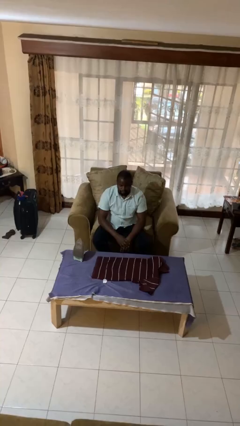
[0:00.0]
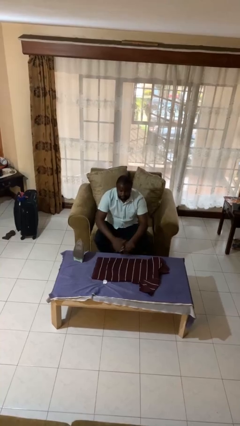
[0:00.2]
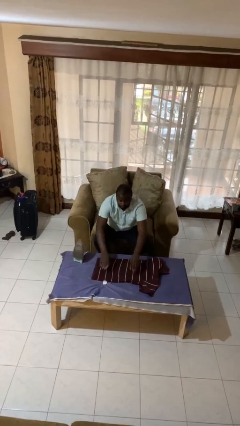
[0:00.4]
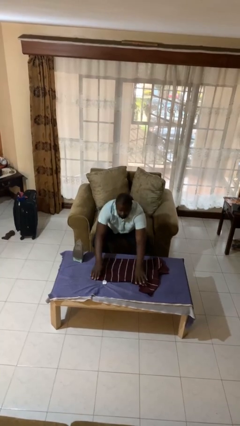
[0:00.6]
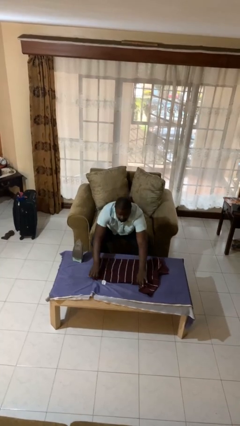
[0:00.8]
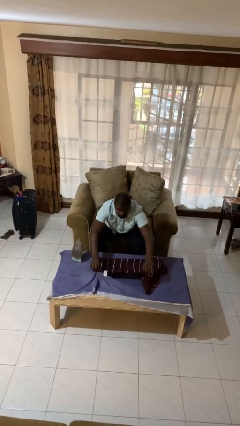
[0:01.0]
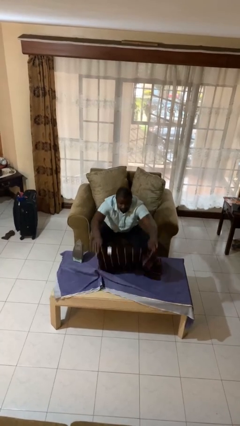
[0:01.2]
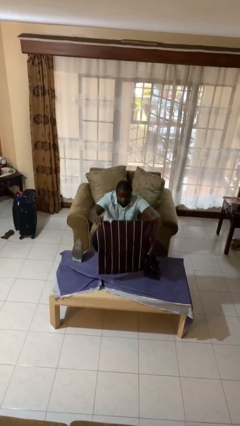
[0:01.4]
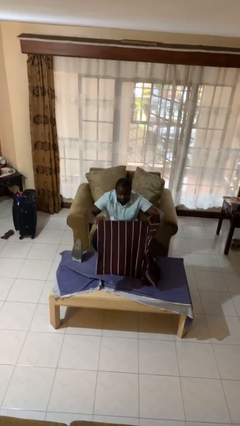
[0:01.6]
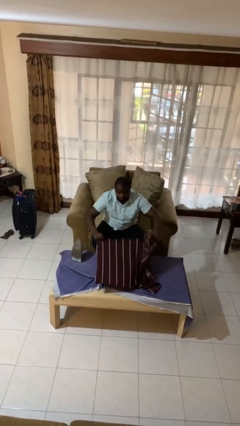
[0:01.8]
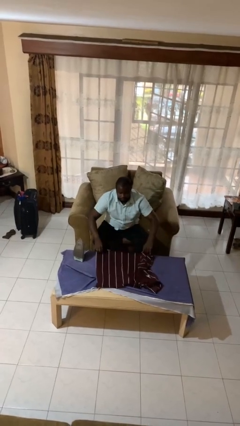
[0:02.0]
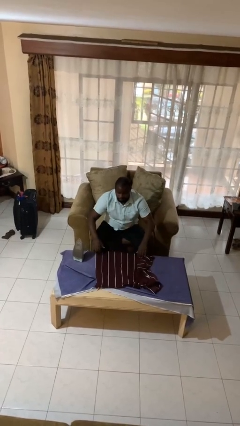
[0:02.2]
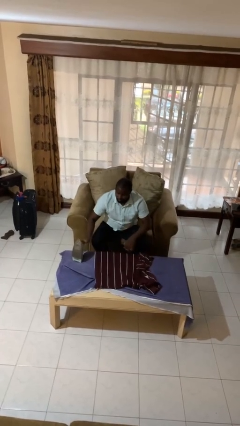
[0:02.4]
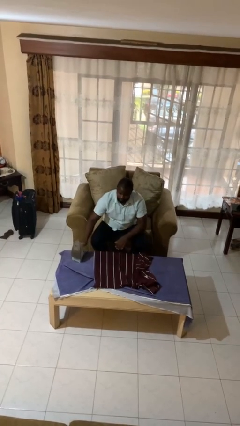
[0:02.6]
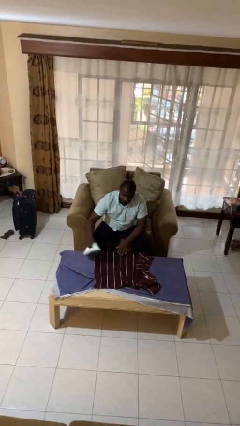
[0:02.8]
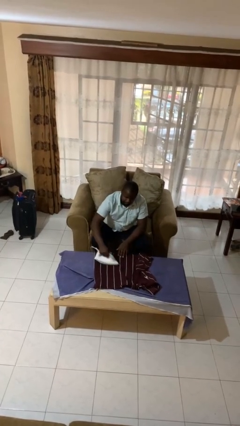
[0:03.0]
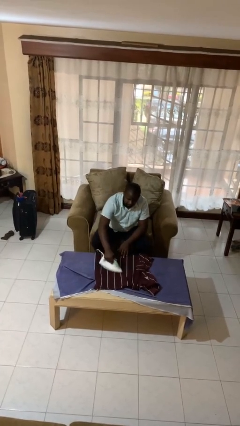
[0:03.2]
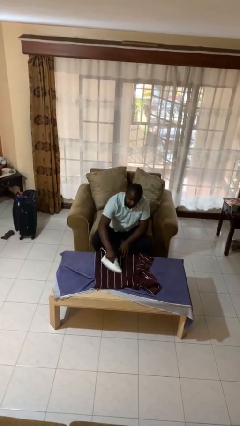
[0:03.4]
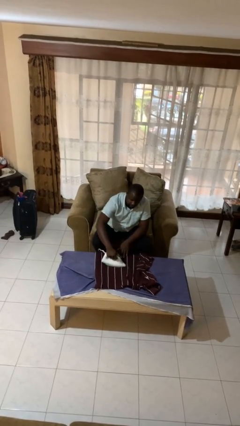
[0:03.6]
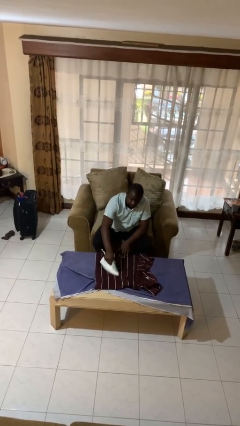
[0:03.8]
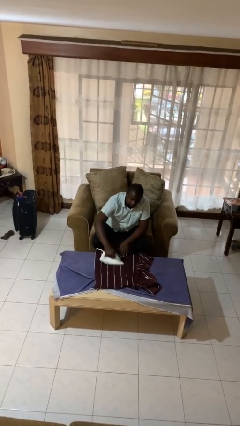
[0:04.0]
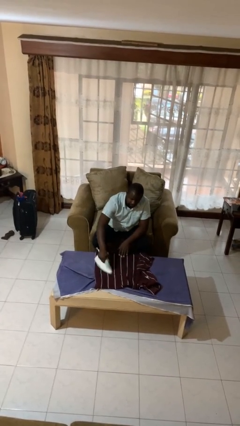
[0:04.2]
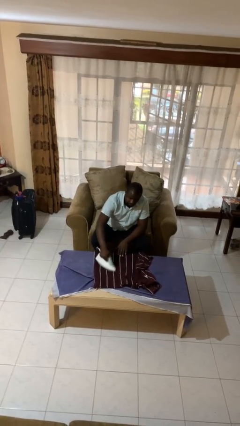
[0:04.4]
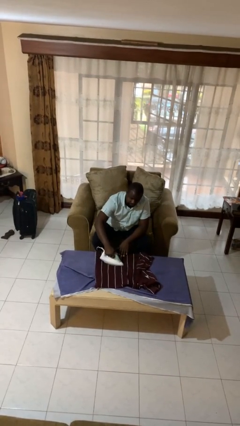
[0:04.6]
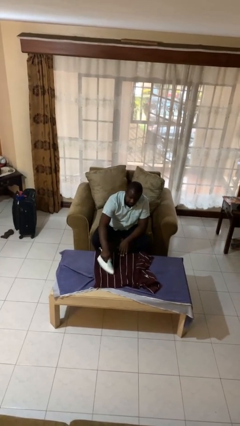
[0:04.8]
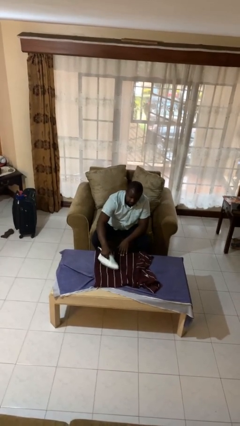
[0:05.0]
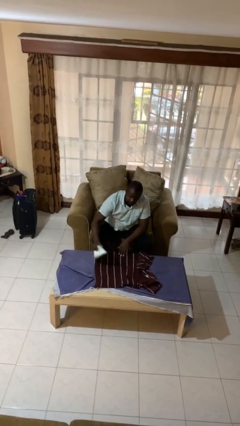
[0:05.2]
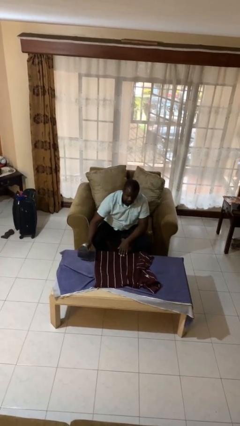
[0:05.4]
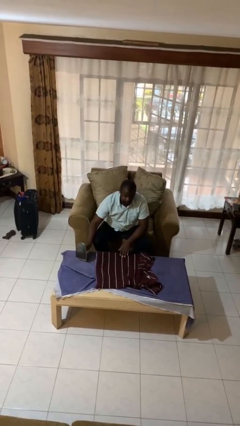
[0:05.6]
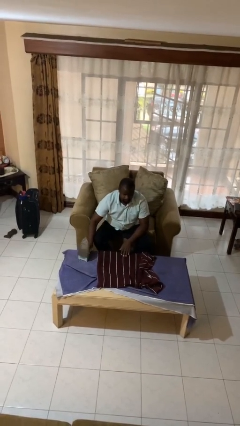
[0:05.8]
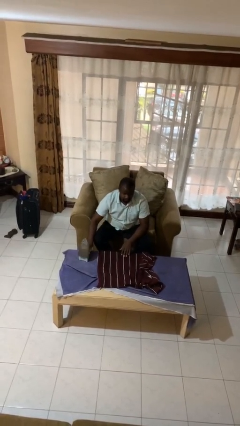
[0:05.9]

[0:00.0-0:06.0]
person irons clothes

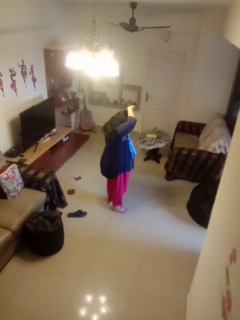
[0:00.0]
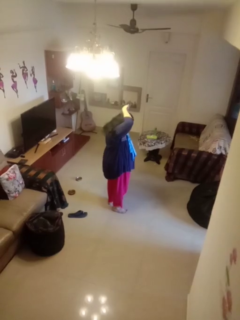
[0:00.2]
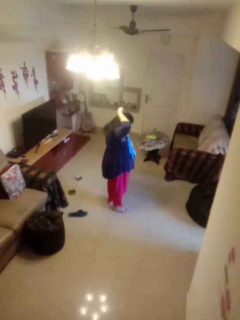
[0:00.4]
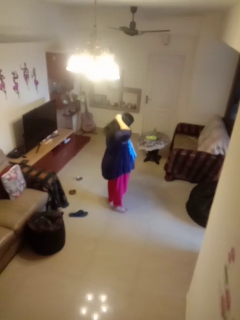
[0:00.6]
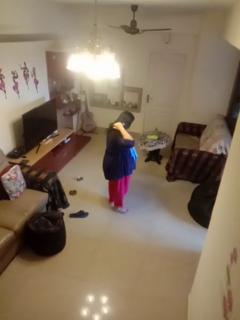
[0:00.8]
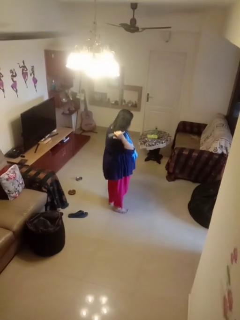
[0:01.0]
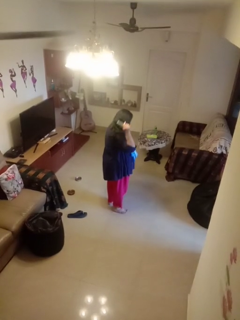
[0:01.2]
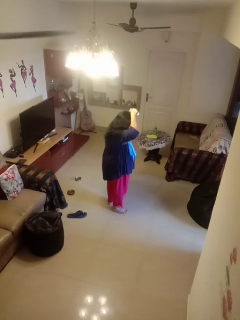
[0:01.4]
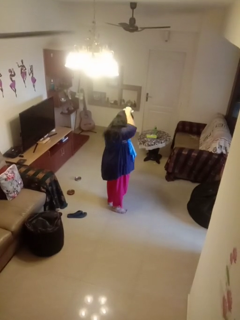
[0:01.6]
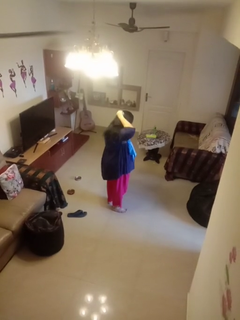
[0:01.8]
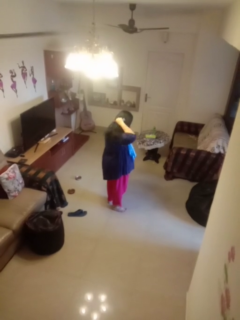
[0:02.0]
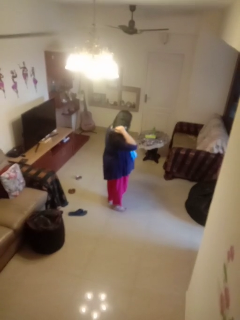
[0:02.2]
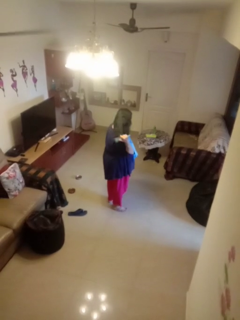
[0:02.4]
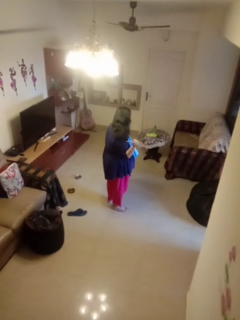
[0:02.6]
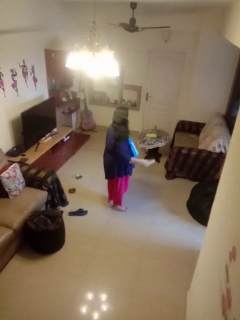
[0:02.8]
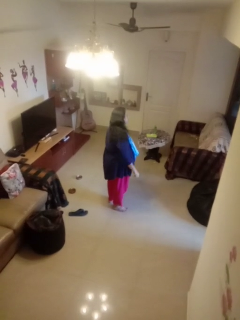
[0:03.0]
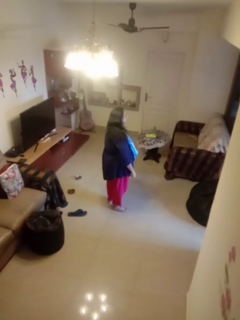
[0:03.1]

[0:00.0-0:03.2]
person brushes hair

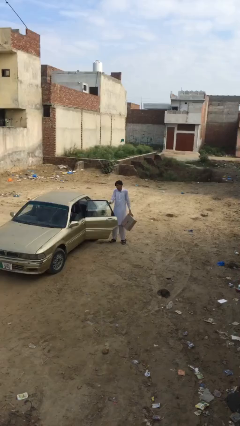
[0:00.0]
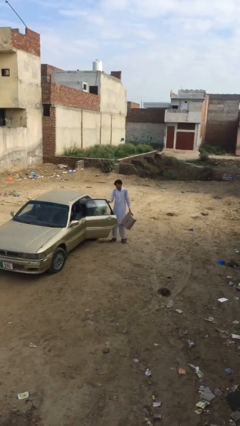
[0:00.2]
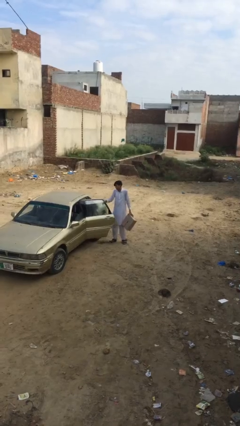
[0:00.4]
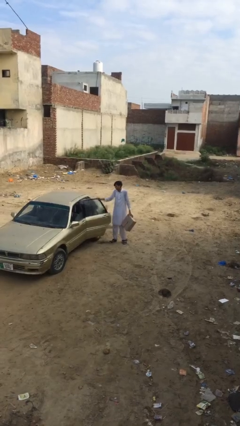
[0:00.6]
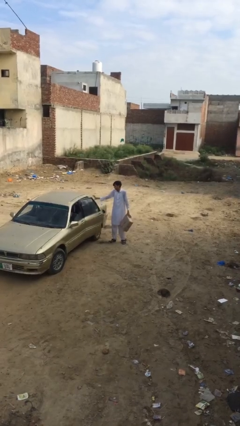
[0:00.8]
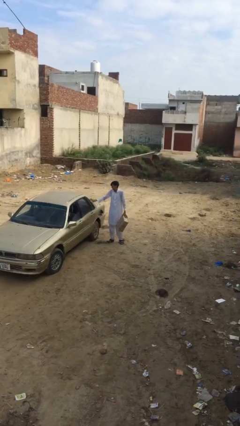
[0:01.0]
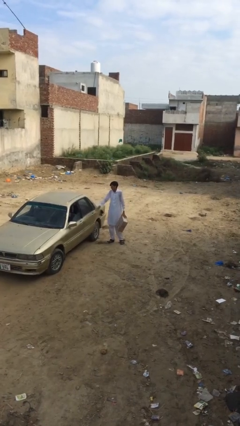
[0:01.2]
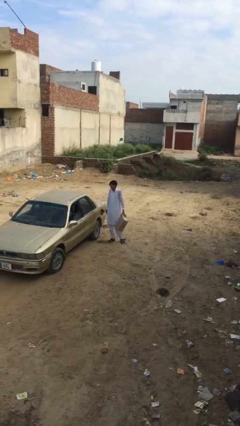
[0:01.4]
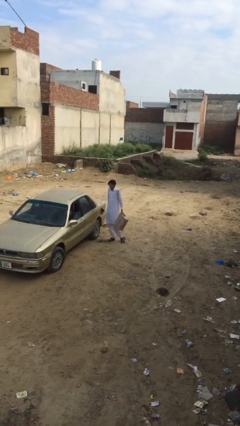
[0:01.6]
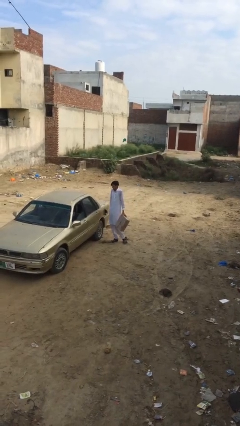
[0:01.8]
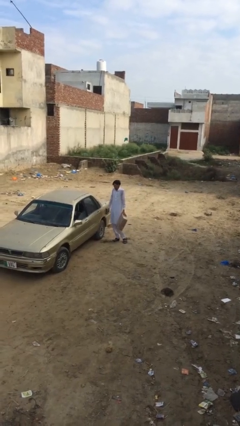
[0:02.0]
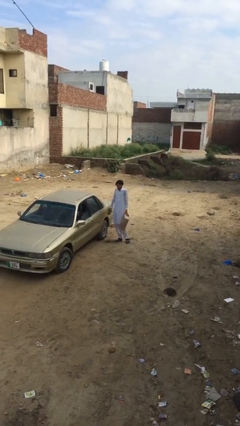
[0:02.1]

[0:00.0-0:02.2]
person closes car door

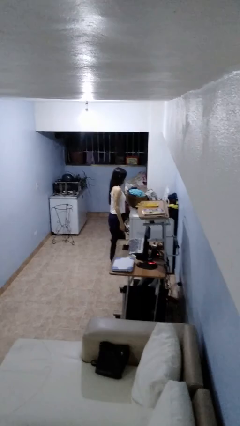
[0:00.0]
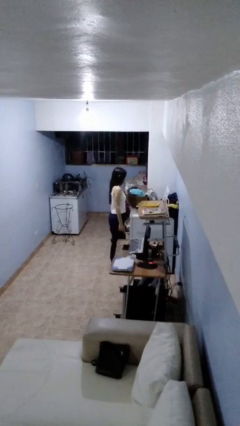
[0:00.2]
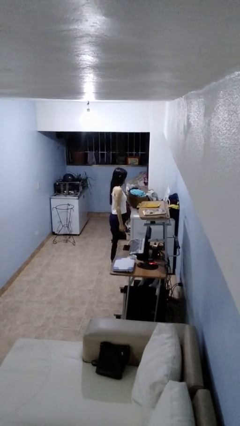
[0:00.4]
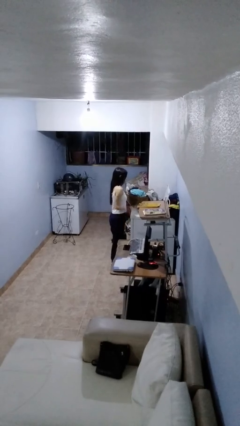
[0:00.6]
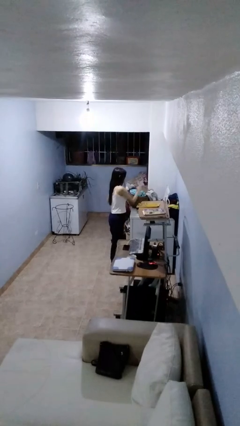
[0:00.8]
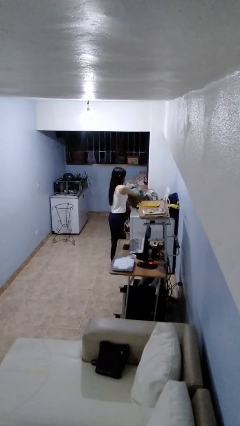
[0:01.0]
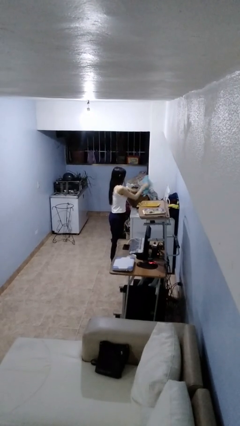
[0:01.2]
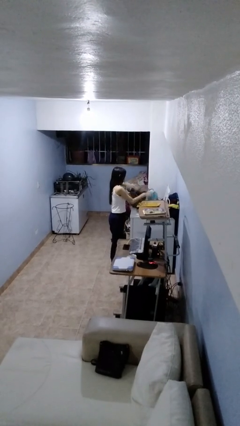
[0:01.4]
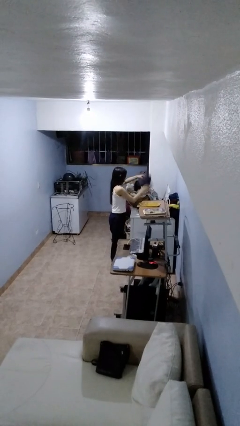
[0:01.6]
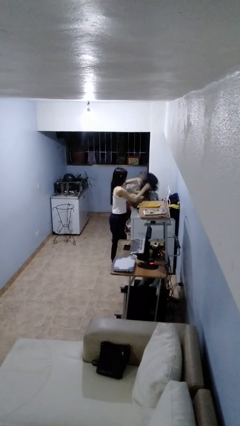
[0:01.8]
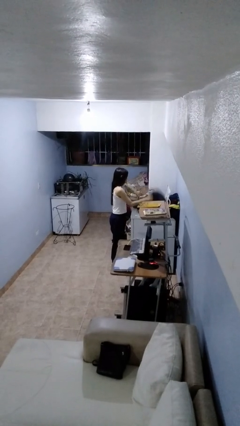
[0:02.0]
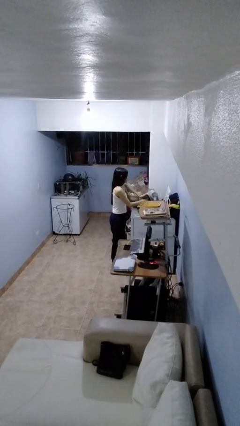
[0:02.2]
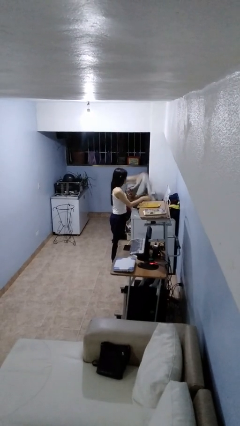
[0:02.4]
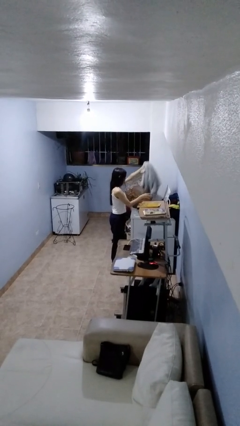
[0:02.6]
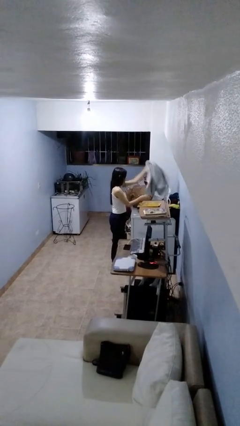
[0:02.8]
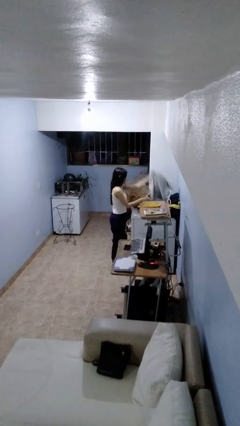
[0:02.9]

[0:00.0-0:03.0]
person loads clotheswasher

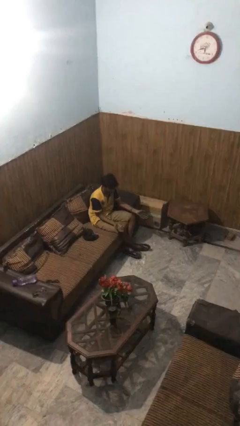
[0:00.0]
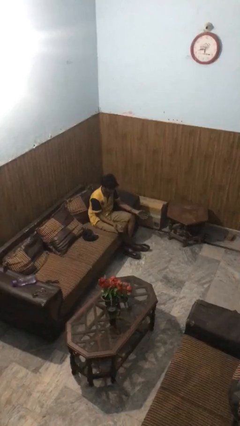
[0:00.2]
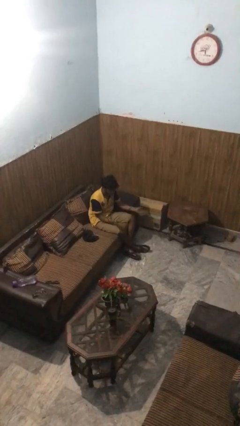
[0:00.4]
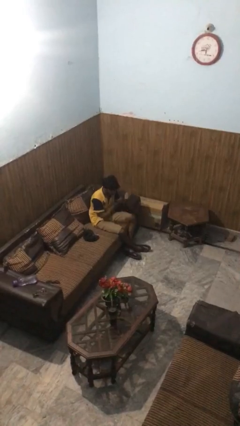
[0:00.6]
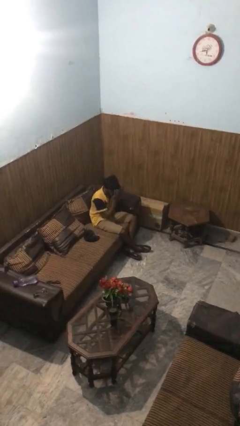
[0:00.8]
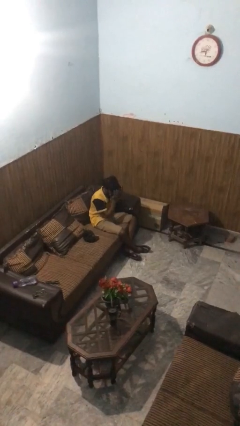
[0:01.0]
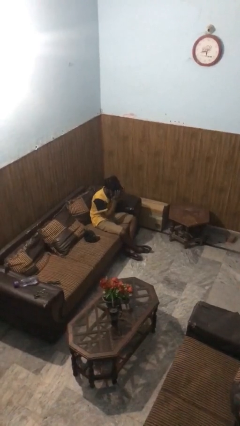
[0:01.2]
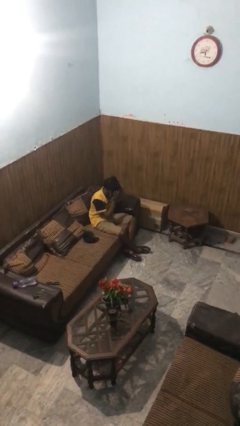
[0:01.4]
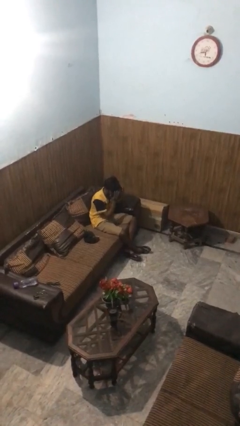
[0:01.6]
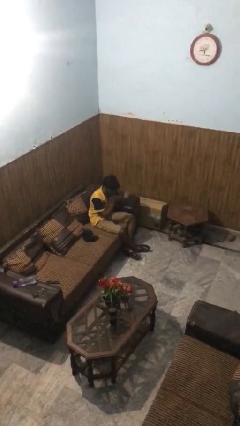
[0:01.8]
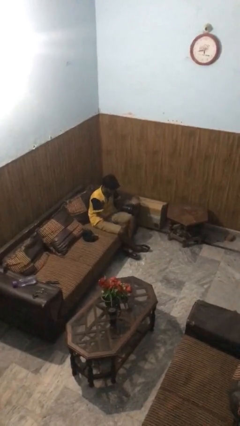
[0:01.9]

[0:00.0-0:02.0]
person covers face with hands

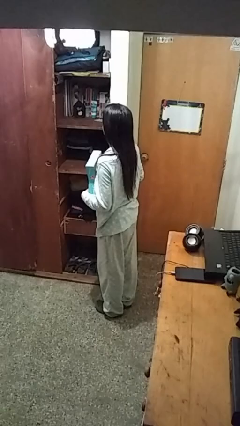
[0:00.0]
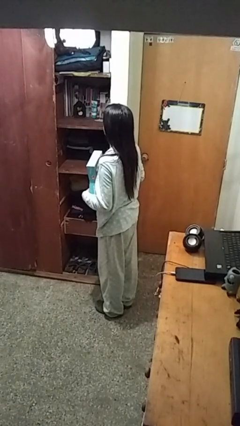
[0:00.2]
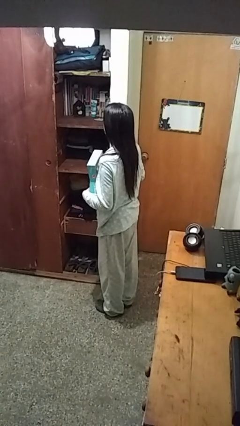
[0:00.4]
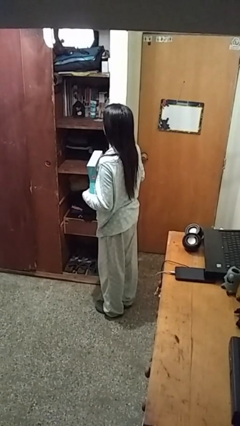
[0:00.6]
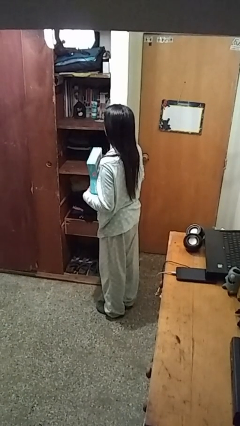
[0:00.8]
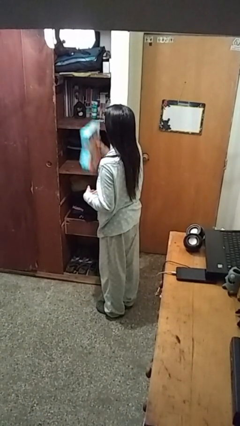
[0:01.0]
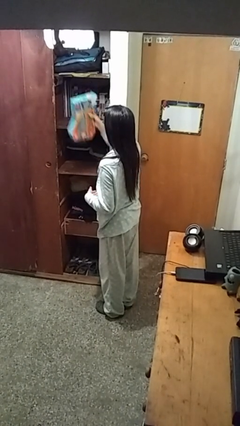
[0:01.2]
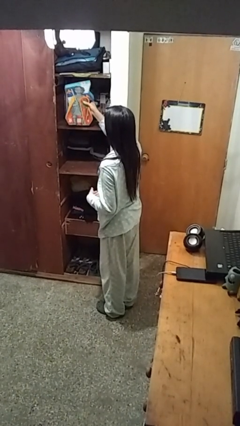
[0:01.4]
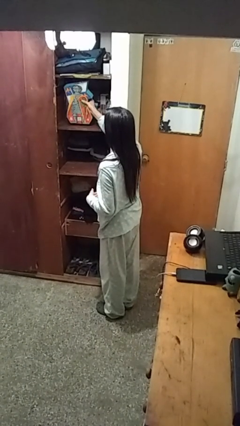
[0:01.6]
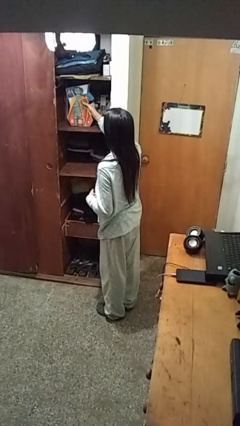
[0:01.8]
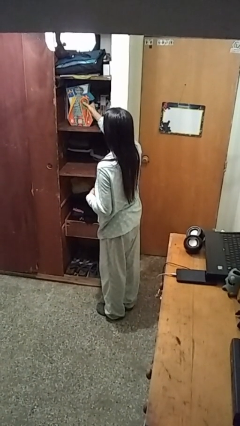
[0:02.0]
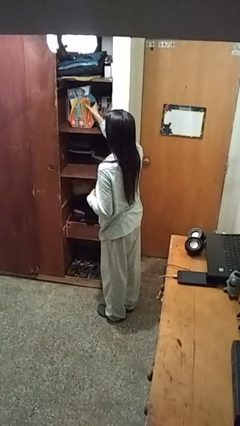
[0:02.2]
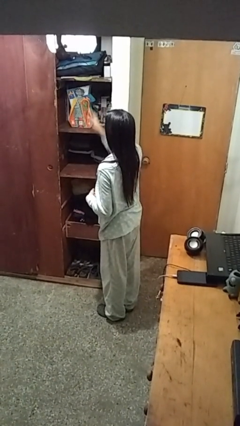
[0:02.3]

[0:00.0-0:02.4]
person picks up object from shelf
